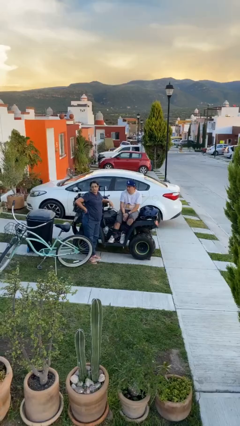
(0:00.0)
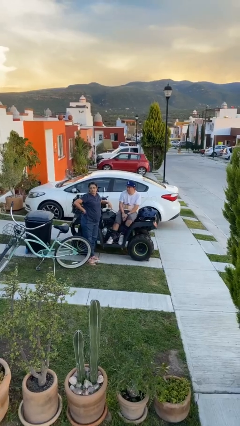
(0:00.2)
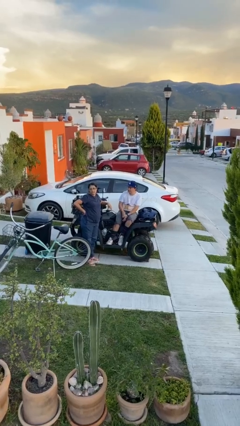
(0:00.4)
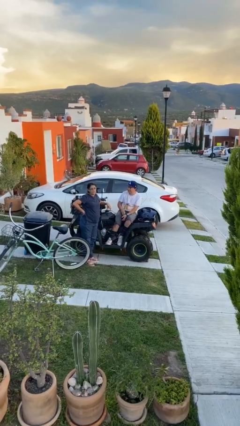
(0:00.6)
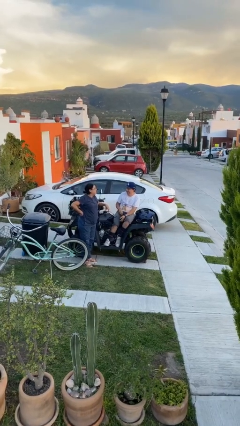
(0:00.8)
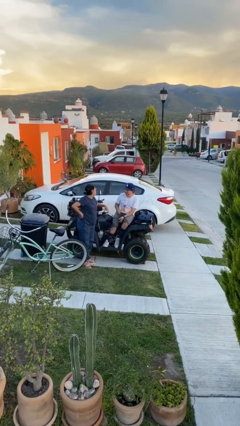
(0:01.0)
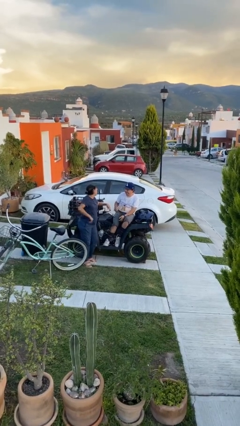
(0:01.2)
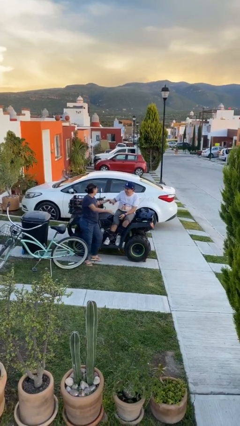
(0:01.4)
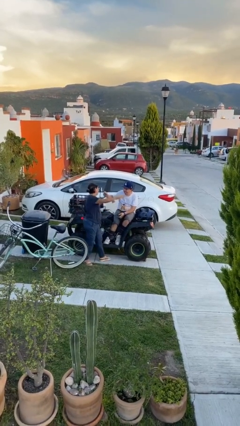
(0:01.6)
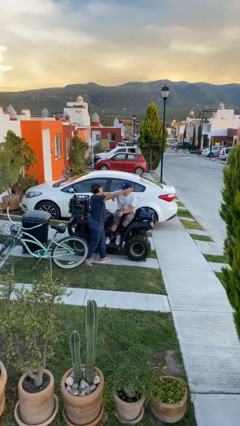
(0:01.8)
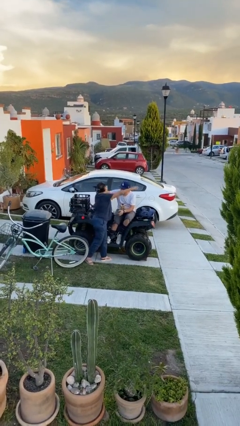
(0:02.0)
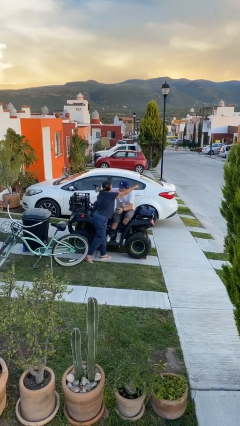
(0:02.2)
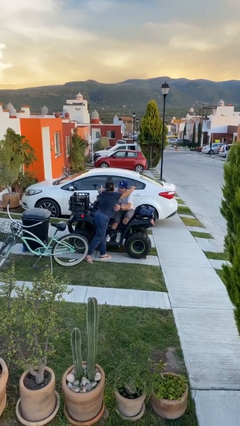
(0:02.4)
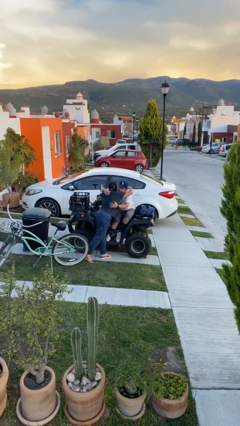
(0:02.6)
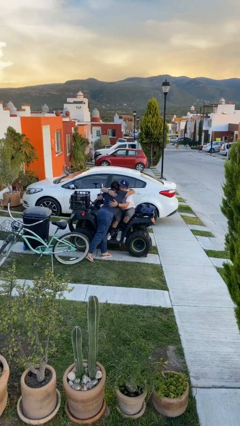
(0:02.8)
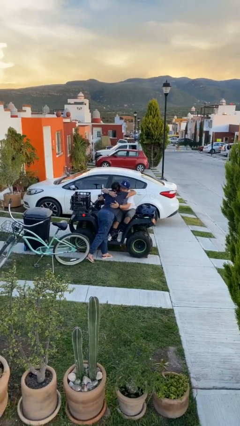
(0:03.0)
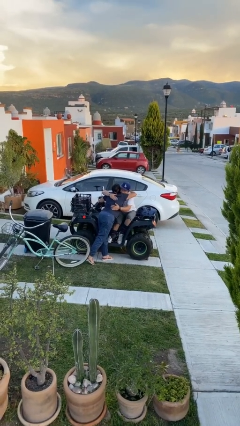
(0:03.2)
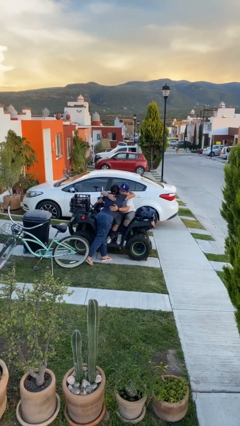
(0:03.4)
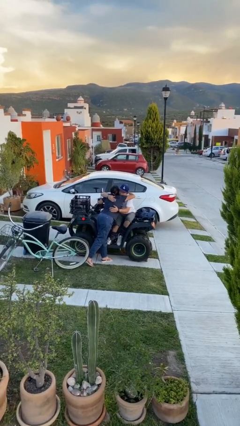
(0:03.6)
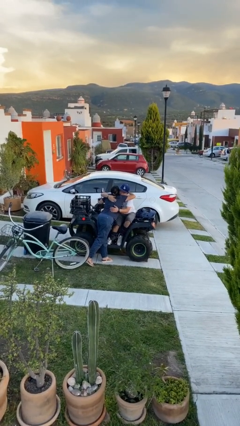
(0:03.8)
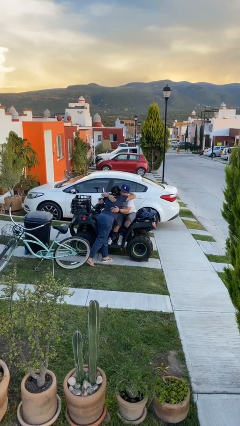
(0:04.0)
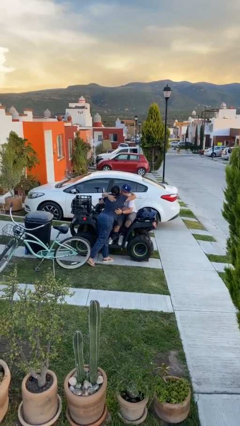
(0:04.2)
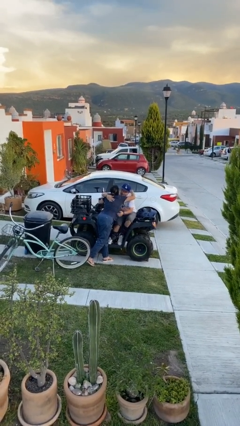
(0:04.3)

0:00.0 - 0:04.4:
person embraces person

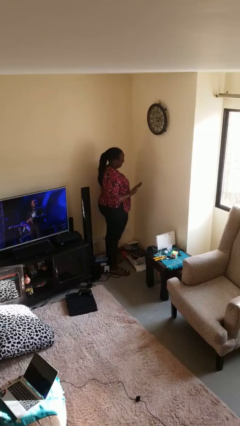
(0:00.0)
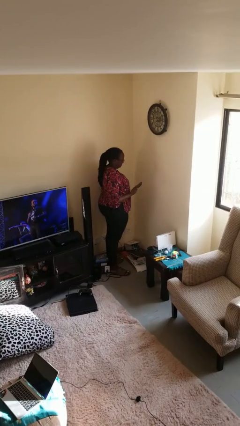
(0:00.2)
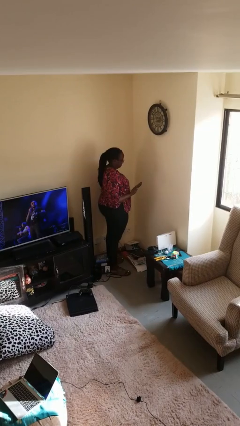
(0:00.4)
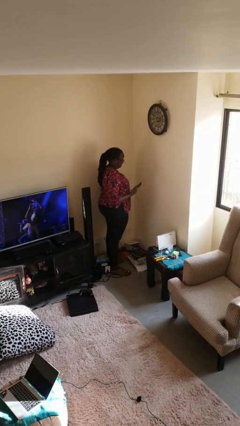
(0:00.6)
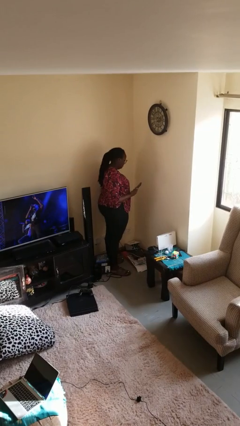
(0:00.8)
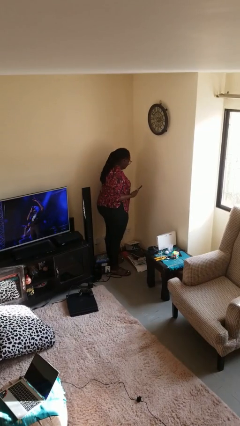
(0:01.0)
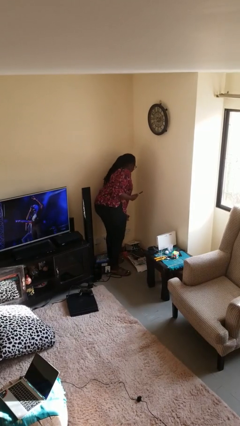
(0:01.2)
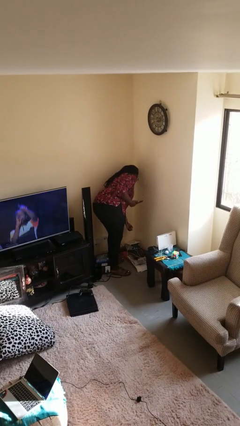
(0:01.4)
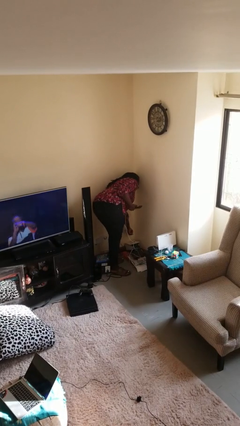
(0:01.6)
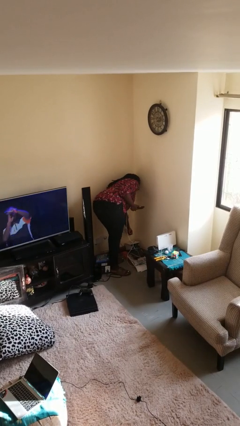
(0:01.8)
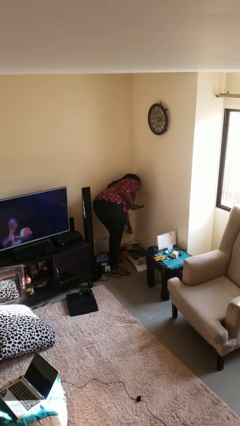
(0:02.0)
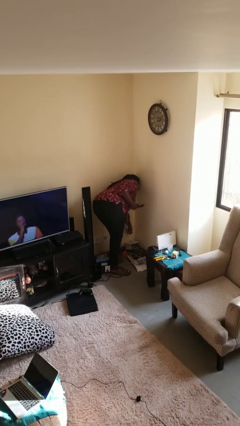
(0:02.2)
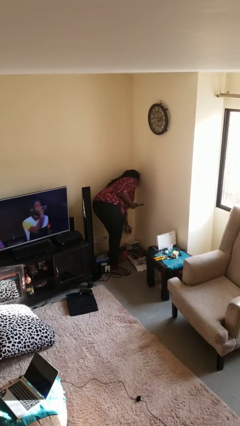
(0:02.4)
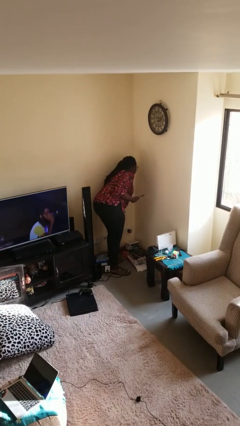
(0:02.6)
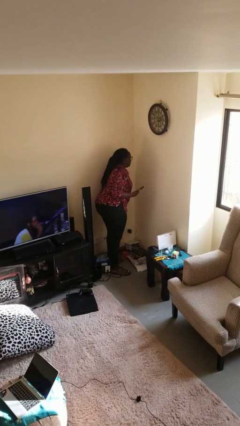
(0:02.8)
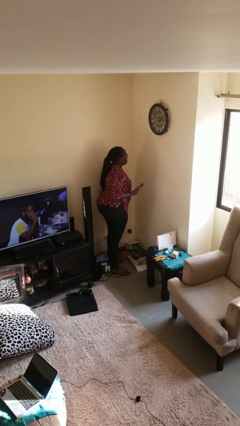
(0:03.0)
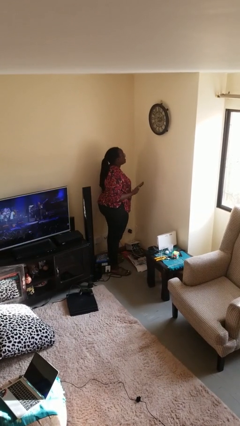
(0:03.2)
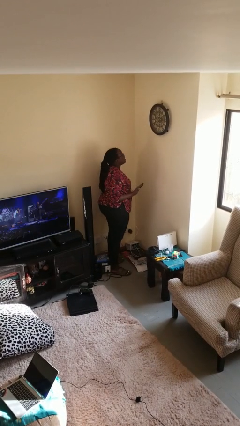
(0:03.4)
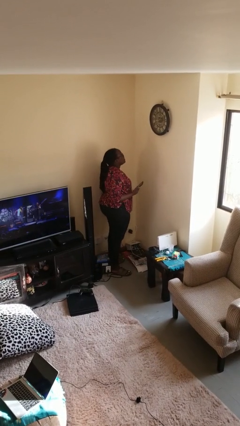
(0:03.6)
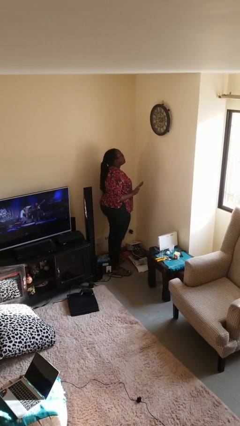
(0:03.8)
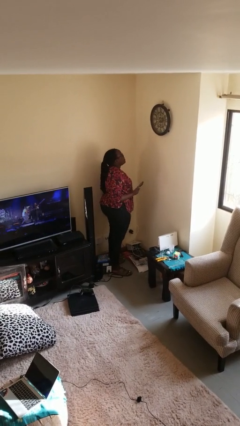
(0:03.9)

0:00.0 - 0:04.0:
person plugs into electrical socket

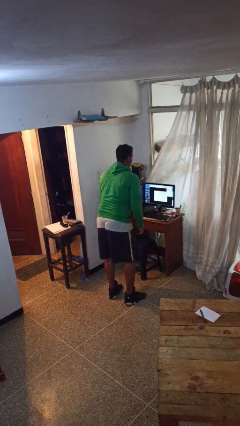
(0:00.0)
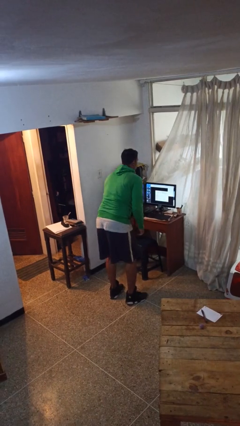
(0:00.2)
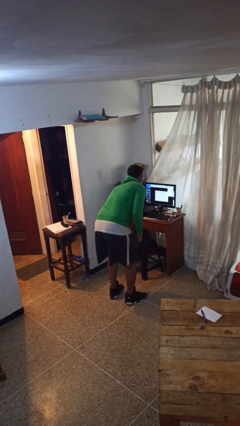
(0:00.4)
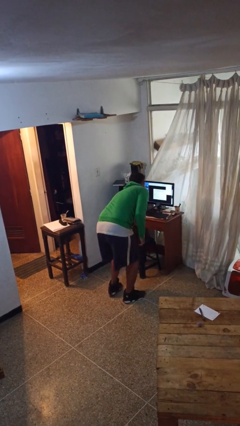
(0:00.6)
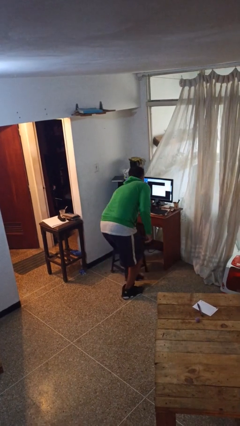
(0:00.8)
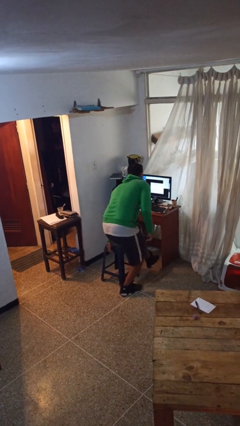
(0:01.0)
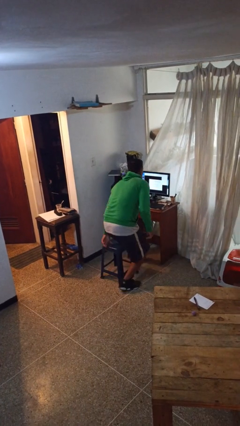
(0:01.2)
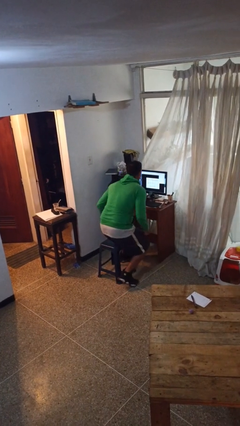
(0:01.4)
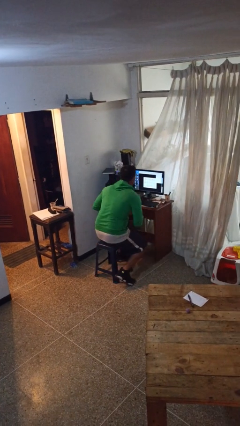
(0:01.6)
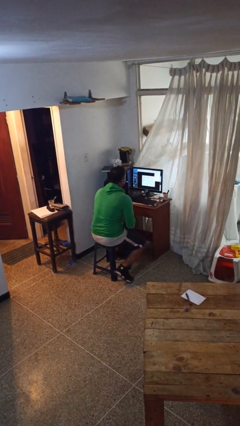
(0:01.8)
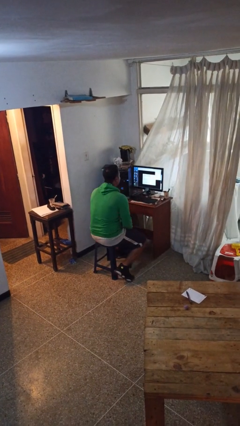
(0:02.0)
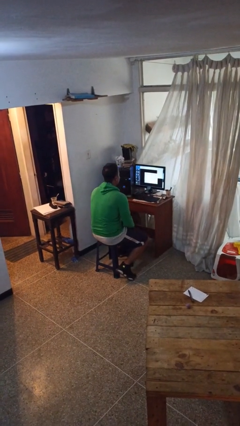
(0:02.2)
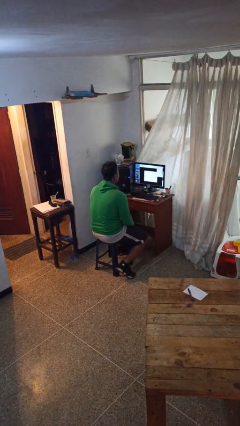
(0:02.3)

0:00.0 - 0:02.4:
person sits down

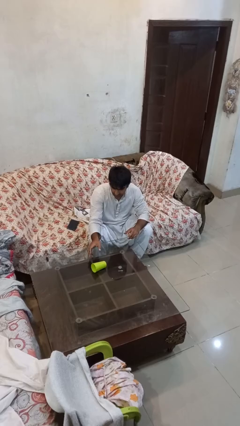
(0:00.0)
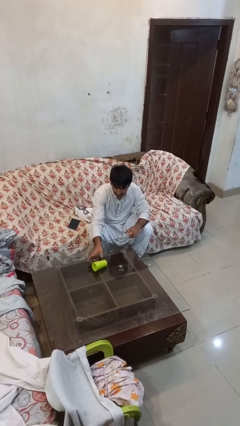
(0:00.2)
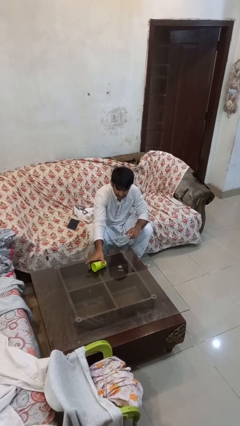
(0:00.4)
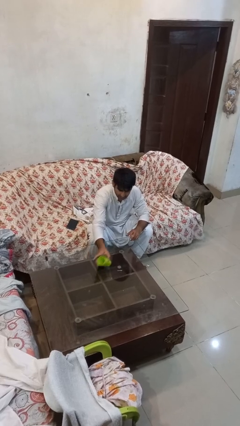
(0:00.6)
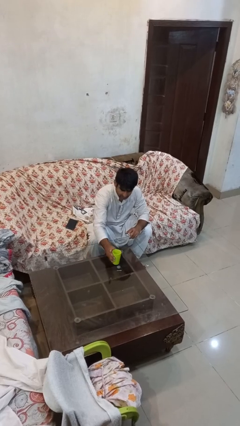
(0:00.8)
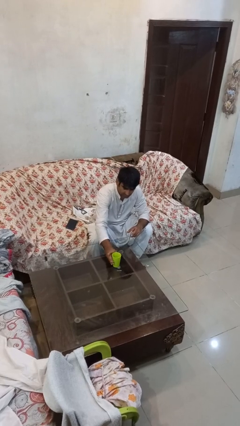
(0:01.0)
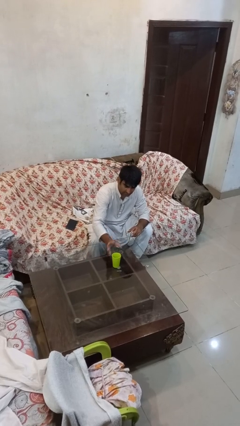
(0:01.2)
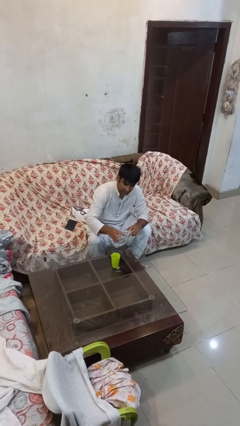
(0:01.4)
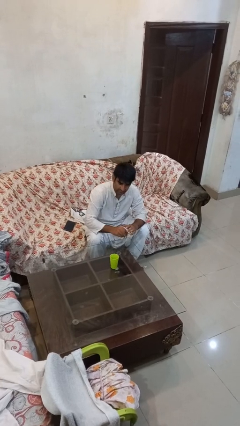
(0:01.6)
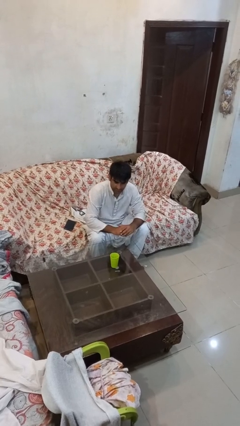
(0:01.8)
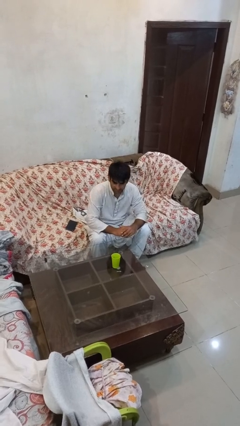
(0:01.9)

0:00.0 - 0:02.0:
person sets upright glass

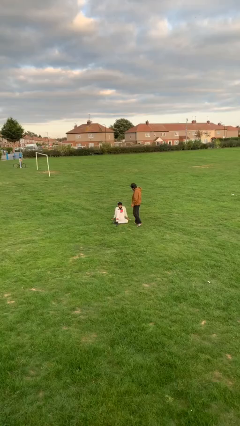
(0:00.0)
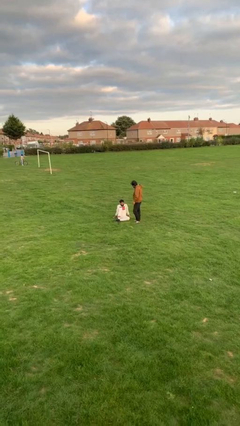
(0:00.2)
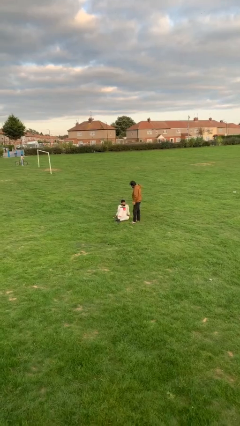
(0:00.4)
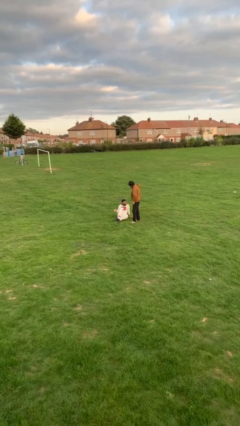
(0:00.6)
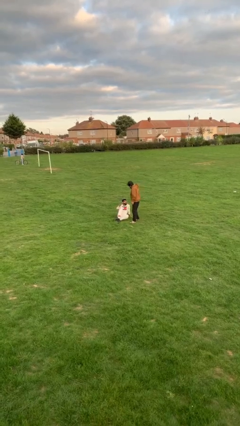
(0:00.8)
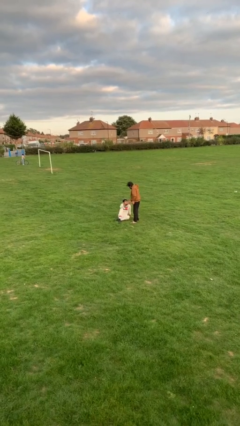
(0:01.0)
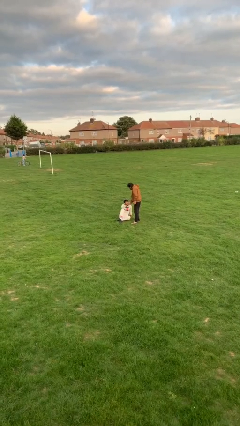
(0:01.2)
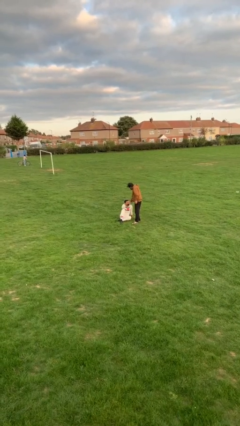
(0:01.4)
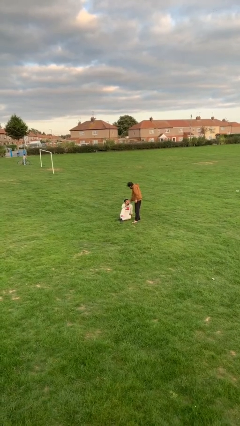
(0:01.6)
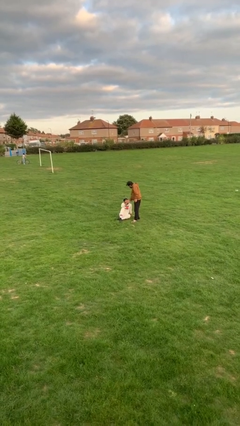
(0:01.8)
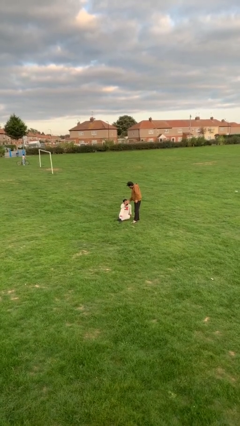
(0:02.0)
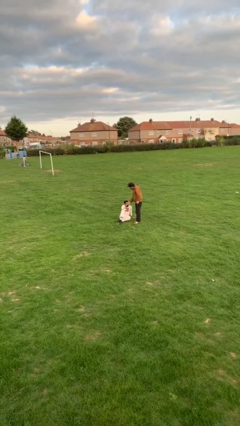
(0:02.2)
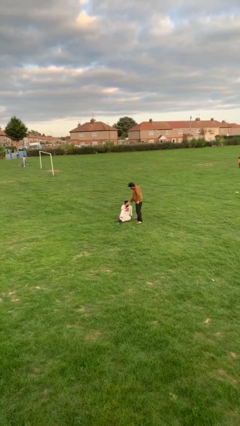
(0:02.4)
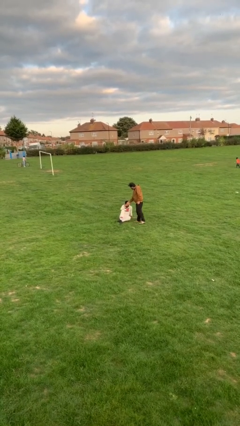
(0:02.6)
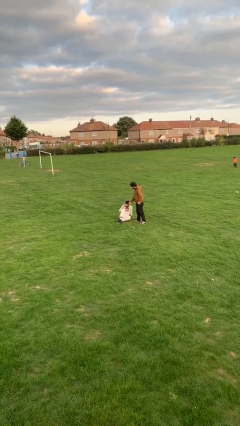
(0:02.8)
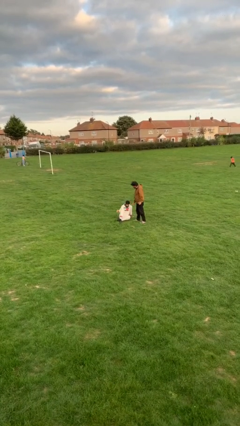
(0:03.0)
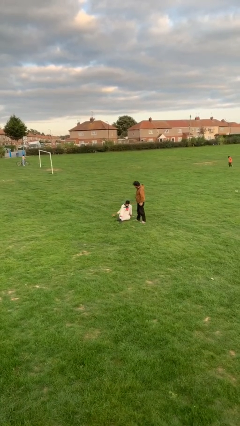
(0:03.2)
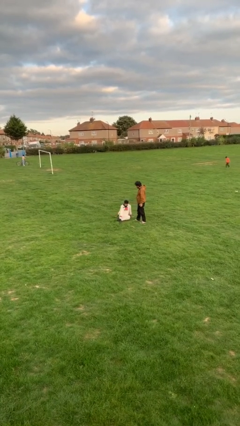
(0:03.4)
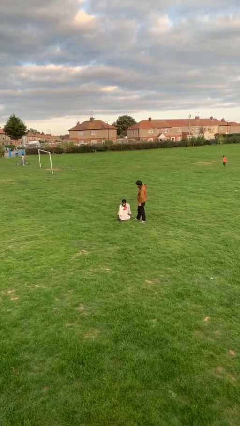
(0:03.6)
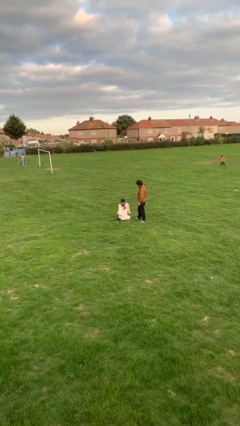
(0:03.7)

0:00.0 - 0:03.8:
person shakes hand

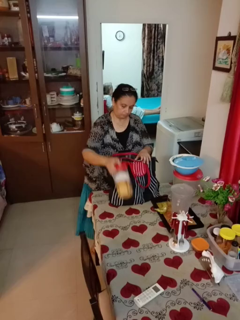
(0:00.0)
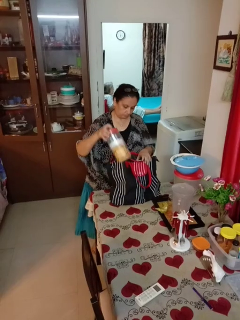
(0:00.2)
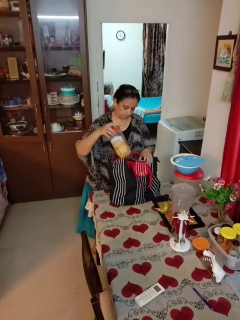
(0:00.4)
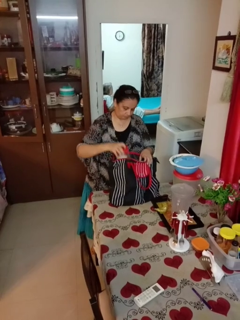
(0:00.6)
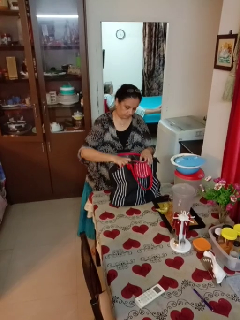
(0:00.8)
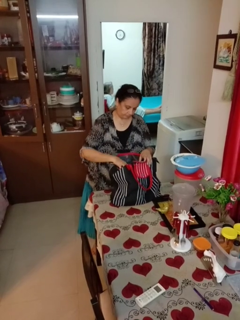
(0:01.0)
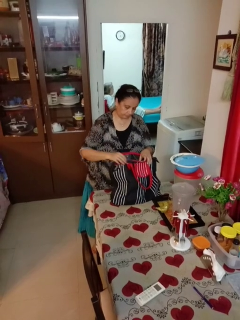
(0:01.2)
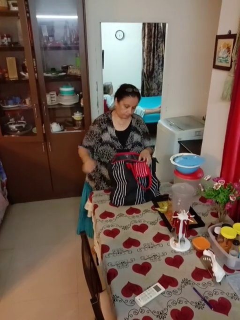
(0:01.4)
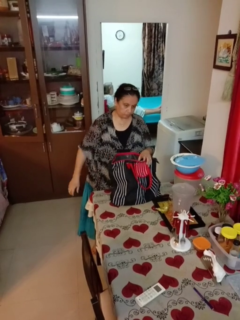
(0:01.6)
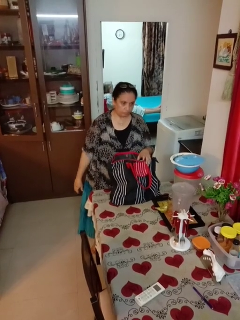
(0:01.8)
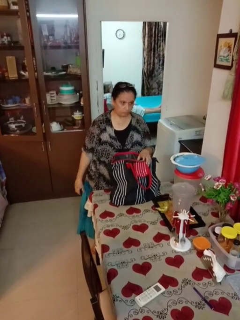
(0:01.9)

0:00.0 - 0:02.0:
person puts object into bag
